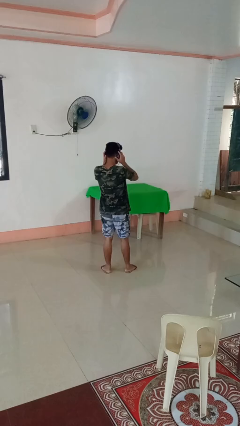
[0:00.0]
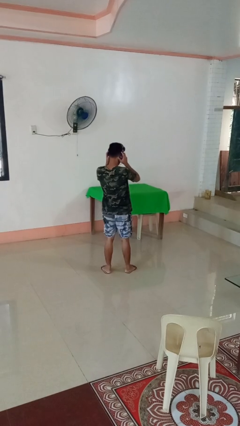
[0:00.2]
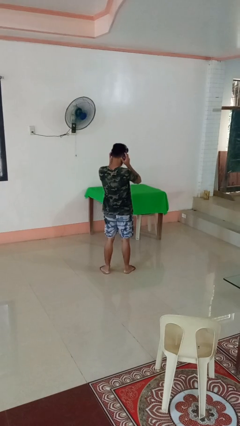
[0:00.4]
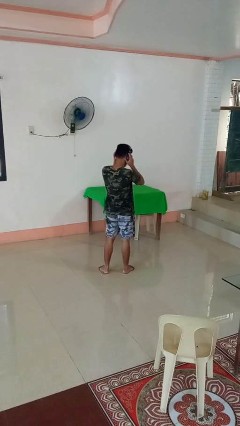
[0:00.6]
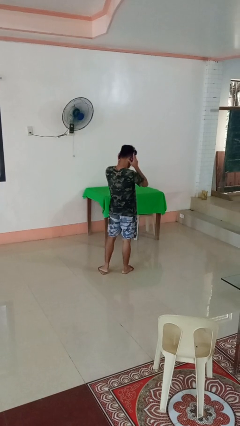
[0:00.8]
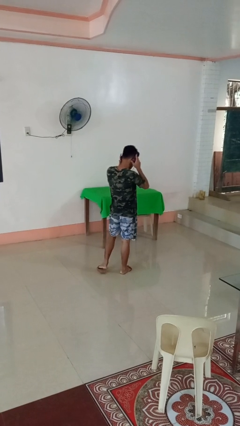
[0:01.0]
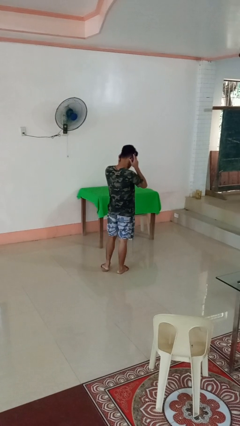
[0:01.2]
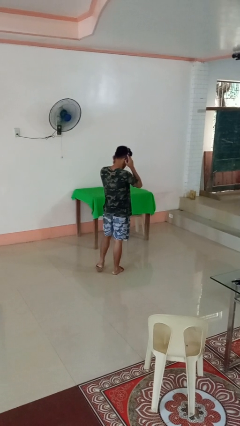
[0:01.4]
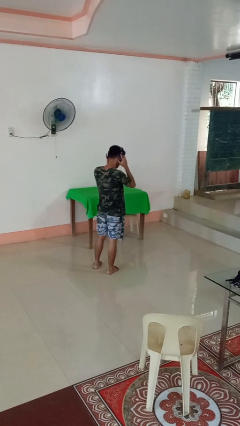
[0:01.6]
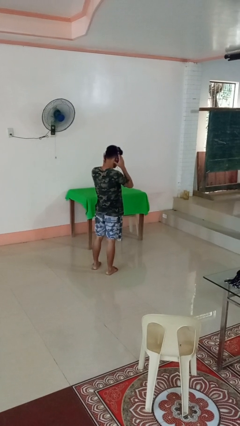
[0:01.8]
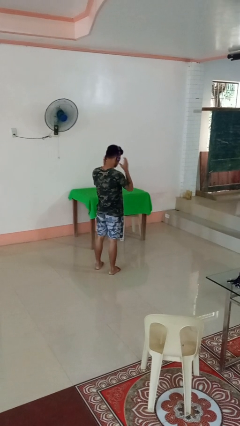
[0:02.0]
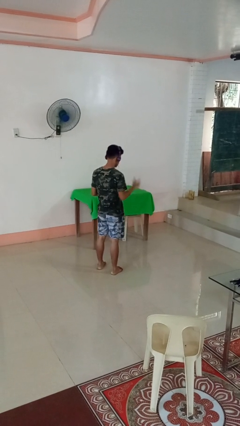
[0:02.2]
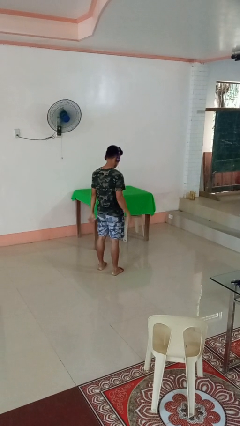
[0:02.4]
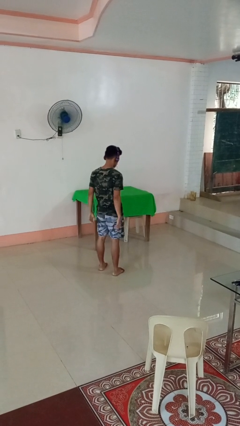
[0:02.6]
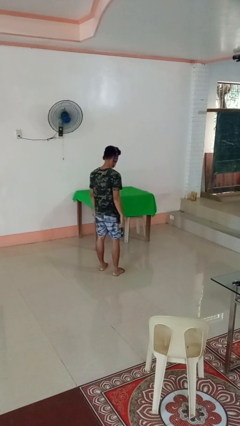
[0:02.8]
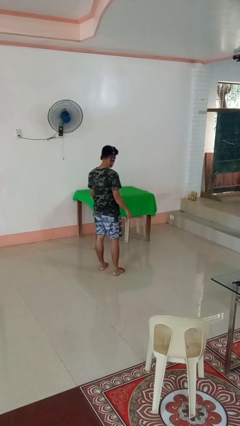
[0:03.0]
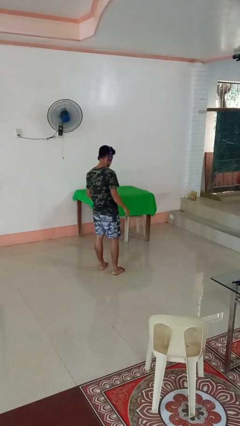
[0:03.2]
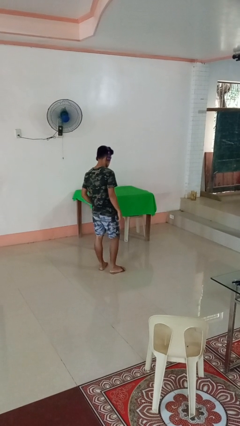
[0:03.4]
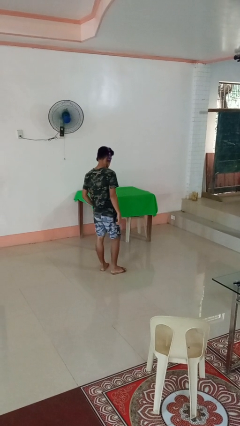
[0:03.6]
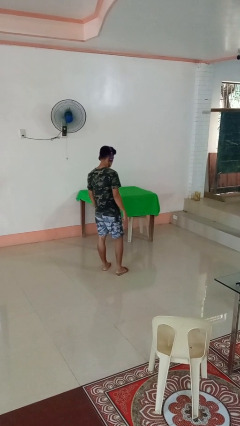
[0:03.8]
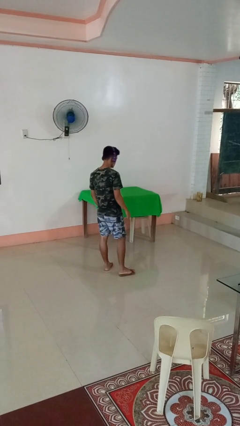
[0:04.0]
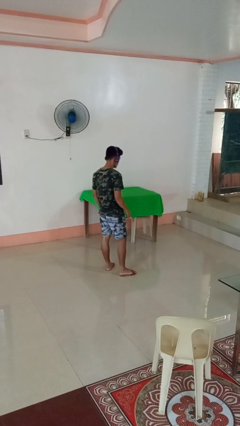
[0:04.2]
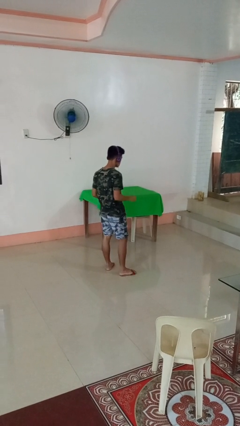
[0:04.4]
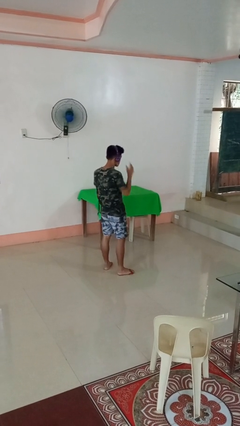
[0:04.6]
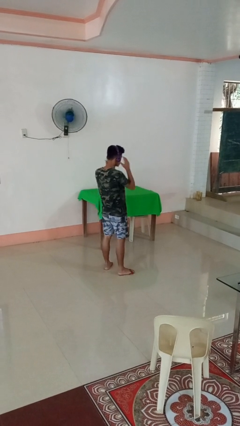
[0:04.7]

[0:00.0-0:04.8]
person puts on headphones

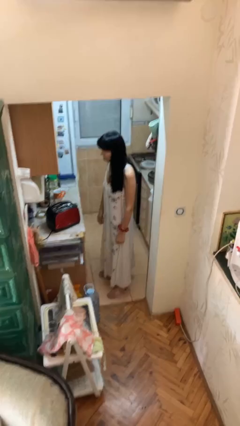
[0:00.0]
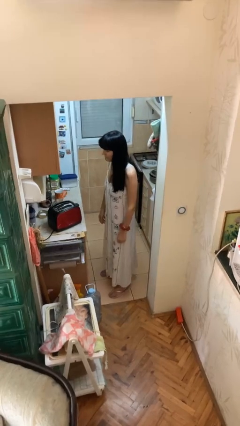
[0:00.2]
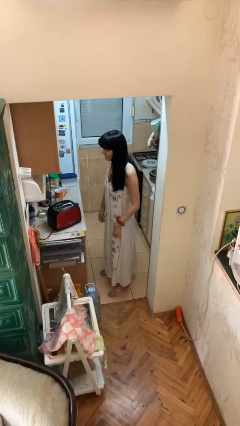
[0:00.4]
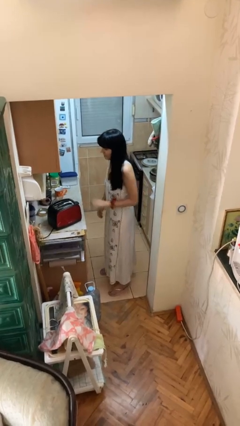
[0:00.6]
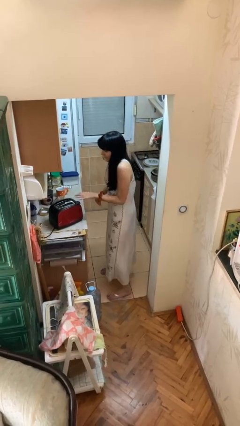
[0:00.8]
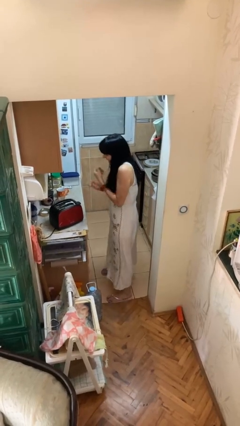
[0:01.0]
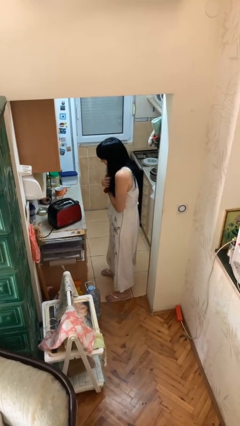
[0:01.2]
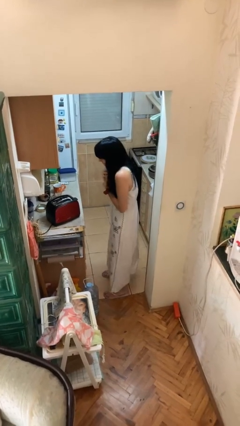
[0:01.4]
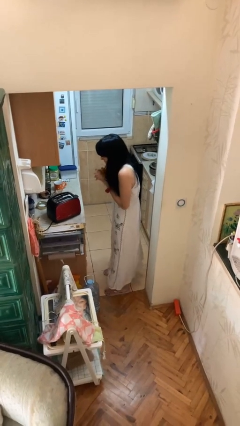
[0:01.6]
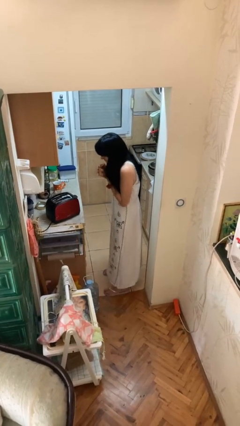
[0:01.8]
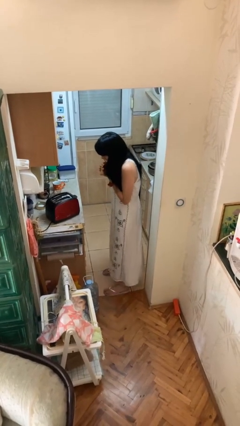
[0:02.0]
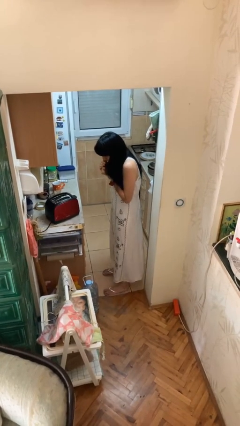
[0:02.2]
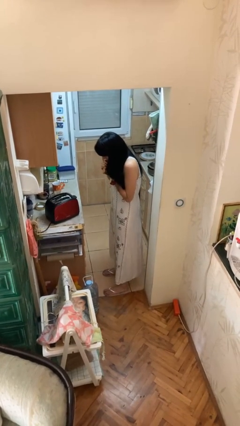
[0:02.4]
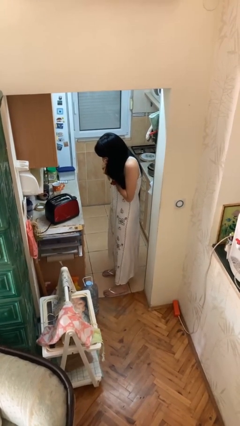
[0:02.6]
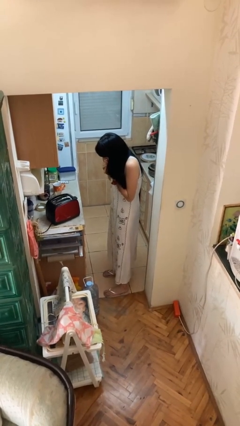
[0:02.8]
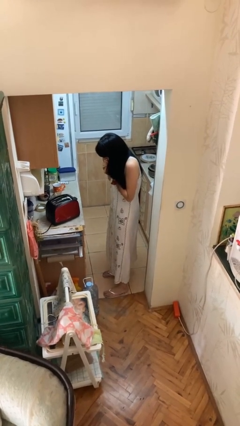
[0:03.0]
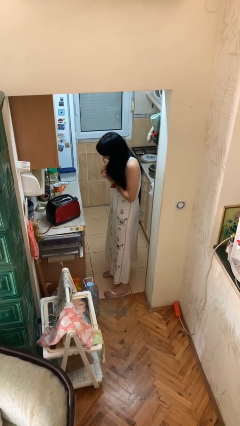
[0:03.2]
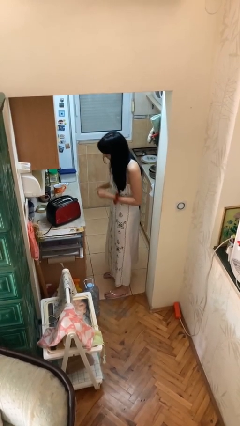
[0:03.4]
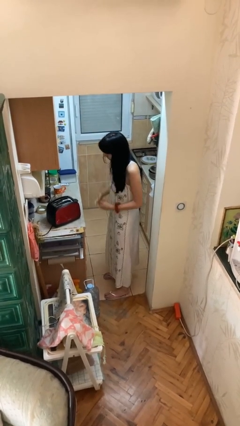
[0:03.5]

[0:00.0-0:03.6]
person burns hand

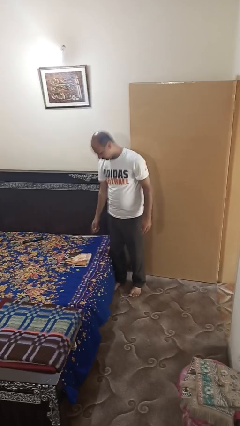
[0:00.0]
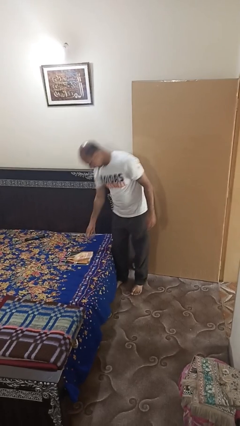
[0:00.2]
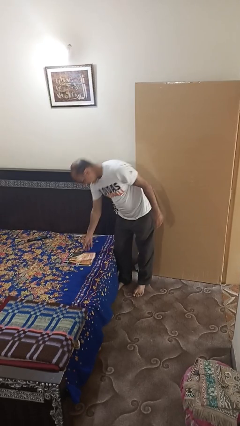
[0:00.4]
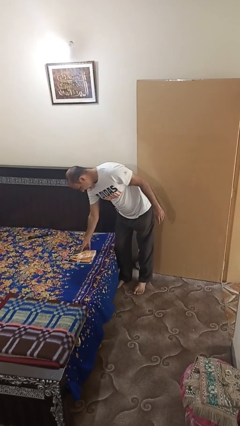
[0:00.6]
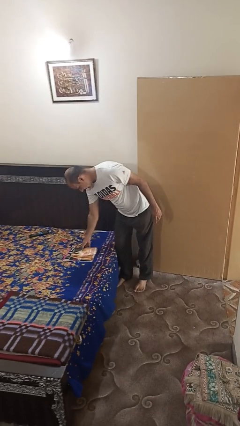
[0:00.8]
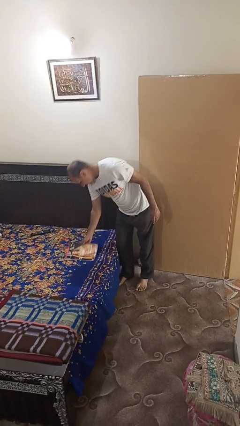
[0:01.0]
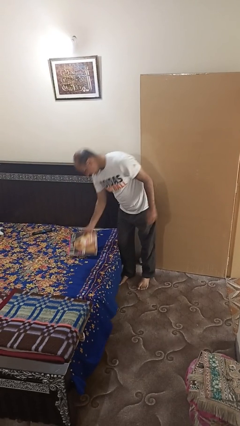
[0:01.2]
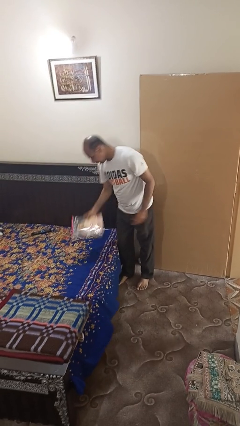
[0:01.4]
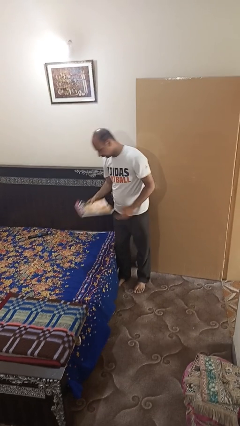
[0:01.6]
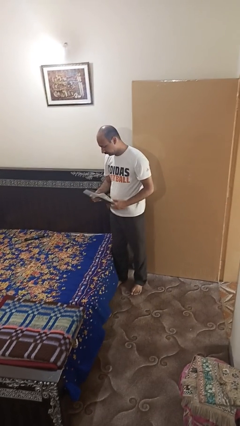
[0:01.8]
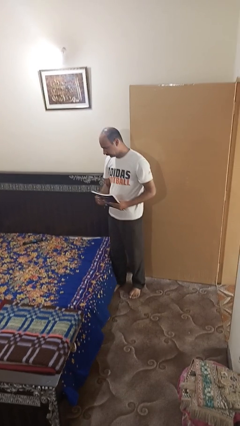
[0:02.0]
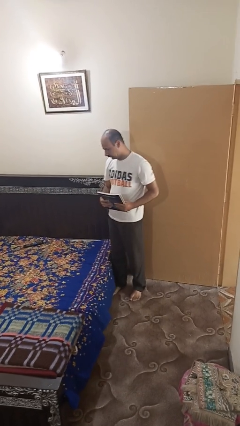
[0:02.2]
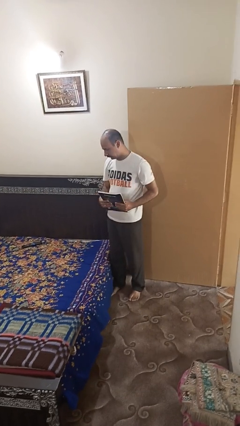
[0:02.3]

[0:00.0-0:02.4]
person picks up object from bed

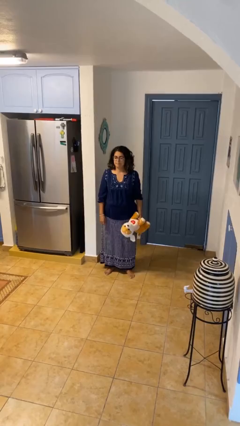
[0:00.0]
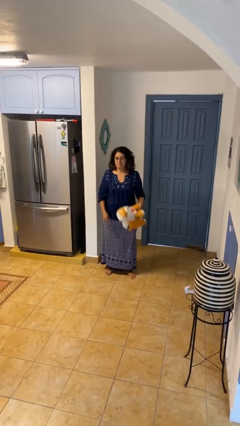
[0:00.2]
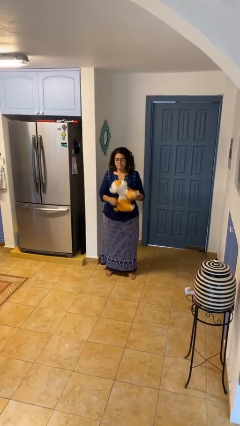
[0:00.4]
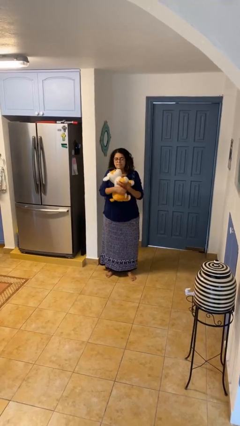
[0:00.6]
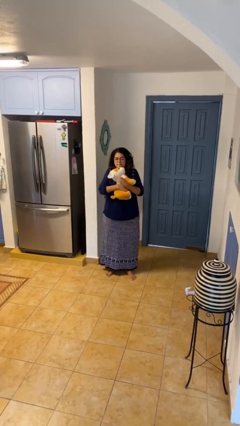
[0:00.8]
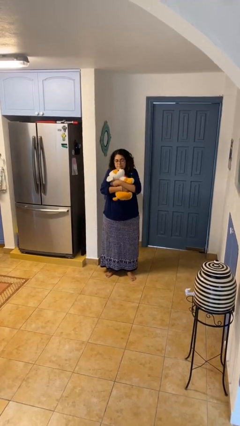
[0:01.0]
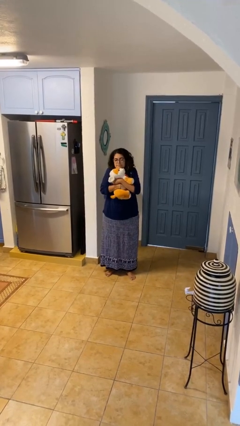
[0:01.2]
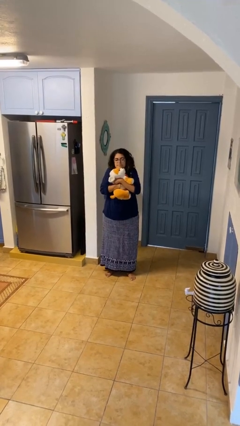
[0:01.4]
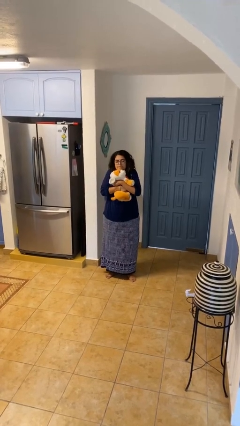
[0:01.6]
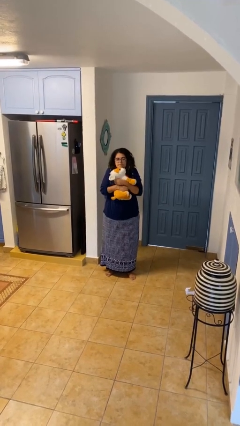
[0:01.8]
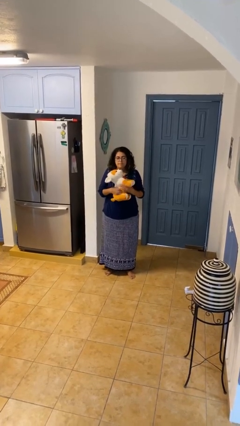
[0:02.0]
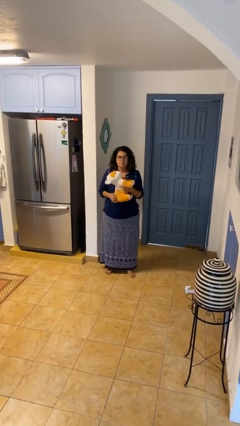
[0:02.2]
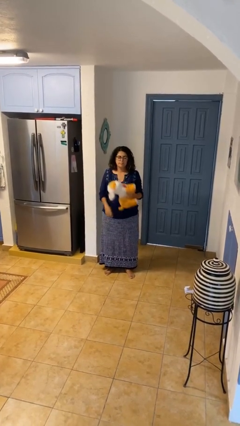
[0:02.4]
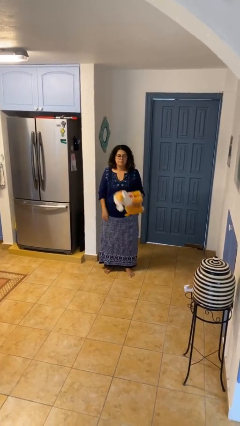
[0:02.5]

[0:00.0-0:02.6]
person hugs stuffed animal

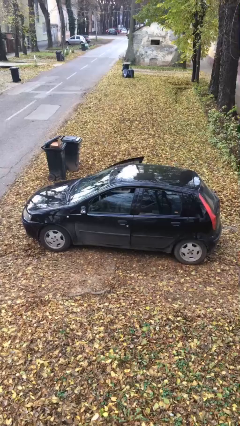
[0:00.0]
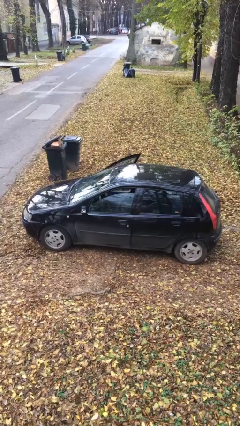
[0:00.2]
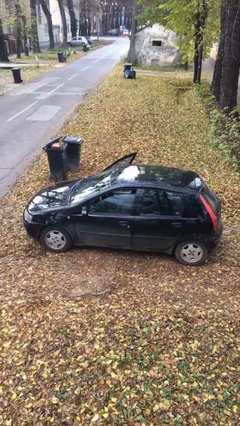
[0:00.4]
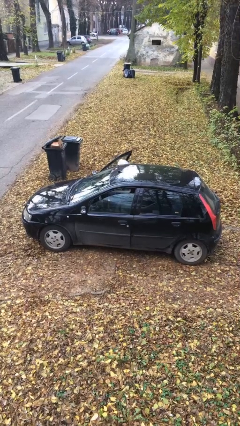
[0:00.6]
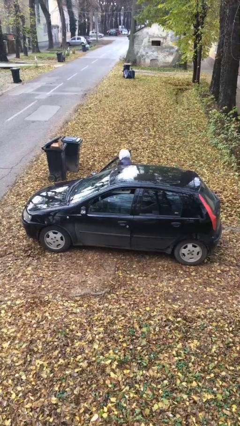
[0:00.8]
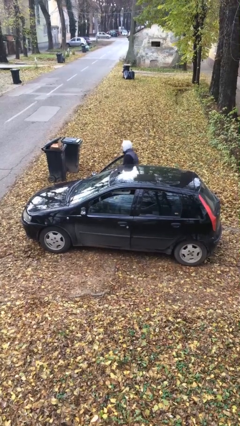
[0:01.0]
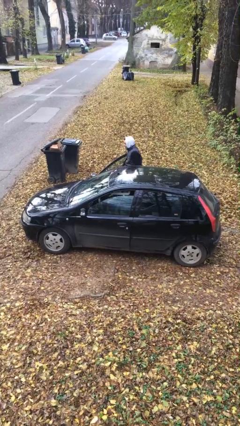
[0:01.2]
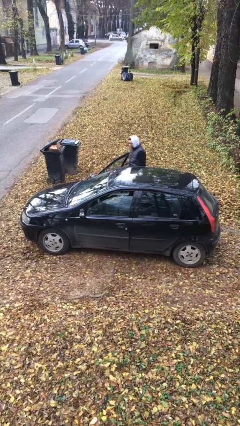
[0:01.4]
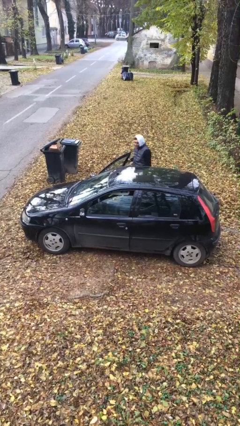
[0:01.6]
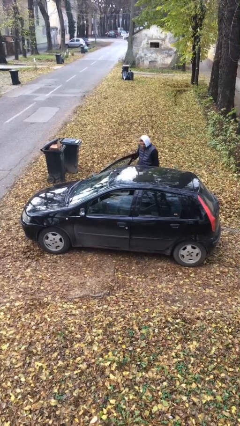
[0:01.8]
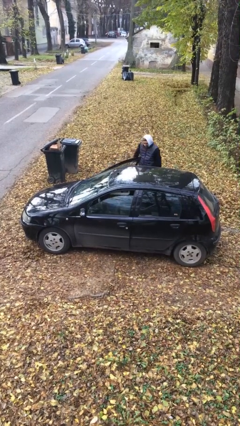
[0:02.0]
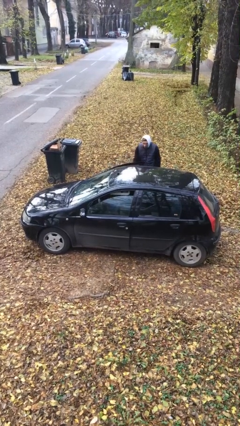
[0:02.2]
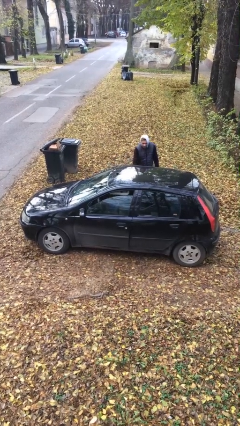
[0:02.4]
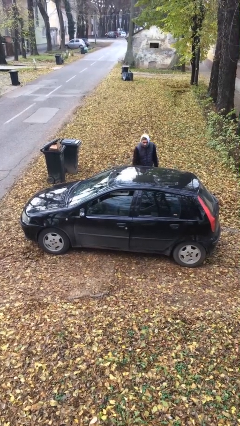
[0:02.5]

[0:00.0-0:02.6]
car drops off person

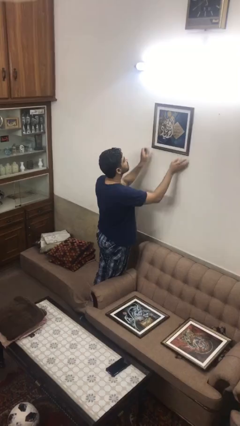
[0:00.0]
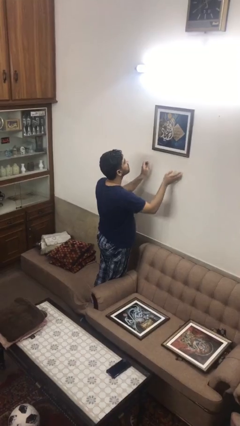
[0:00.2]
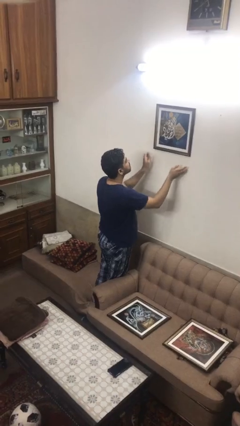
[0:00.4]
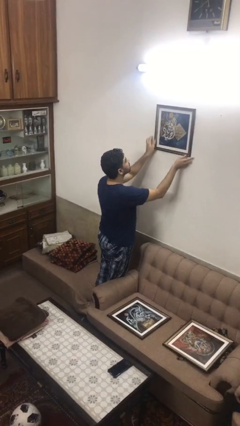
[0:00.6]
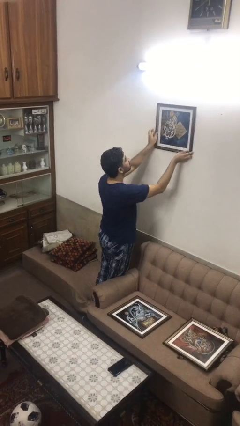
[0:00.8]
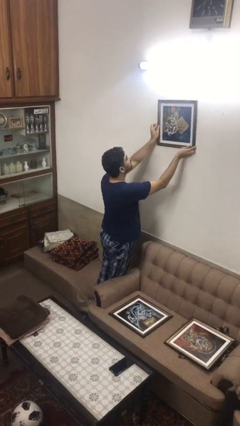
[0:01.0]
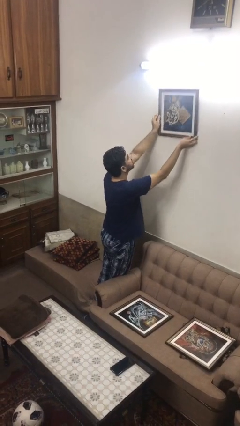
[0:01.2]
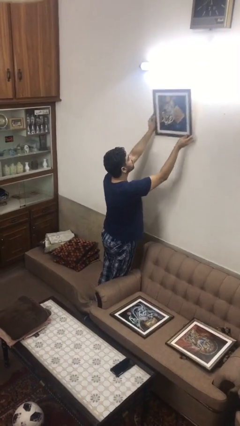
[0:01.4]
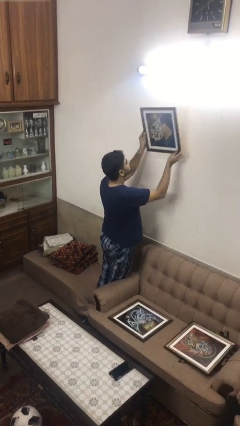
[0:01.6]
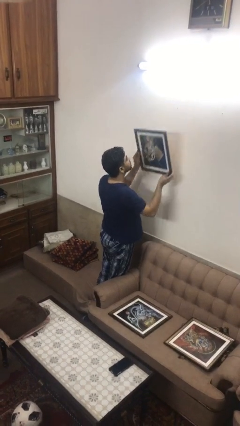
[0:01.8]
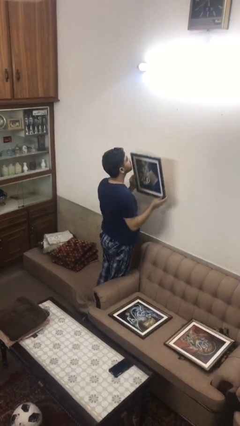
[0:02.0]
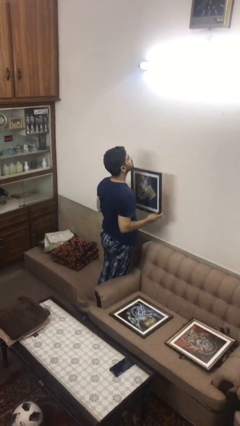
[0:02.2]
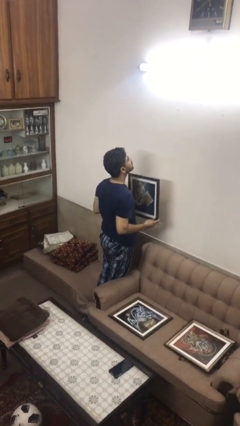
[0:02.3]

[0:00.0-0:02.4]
person takes down picture frame
